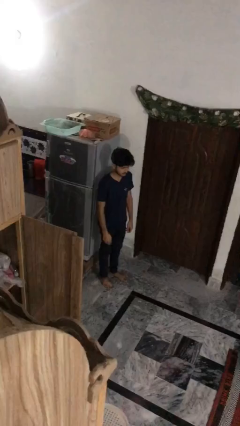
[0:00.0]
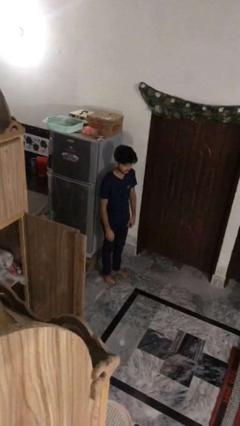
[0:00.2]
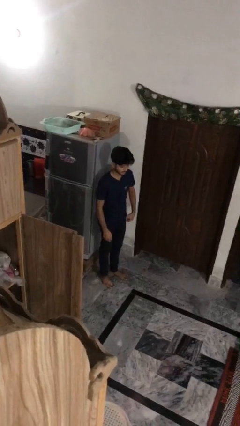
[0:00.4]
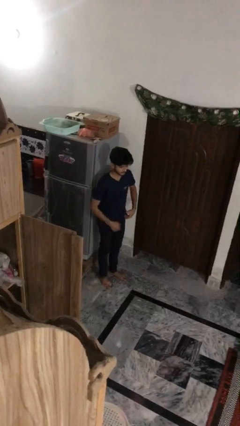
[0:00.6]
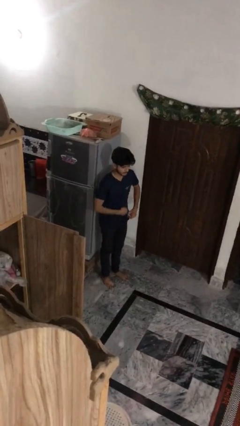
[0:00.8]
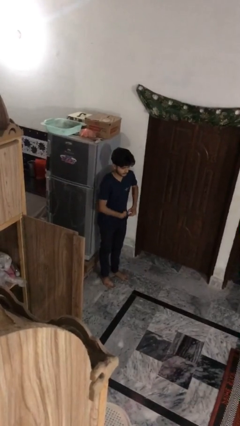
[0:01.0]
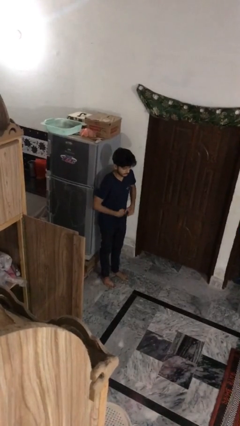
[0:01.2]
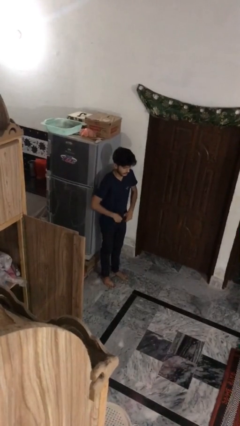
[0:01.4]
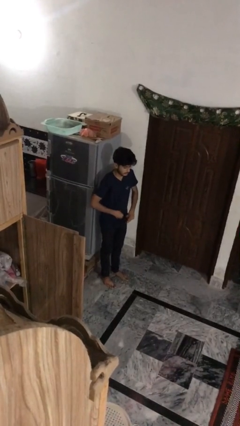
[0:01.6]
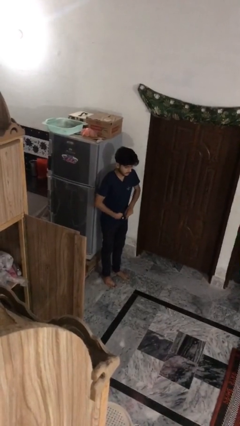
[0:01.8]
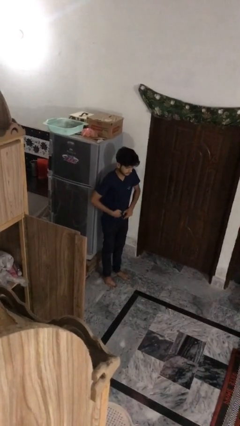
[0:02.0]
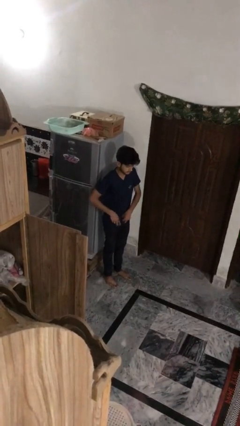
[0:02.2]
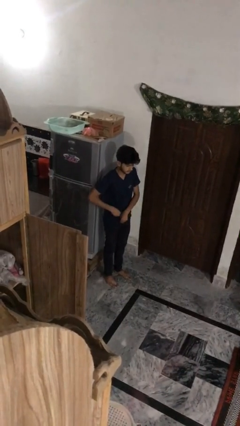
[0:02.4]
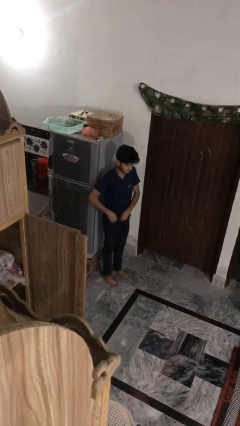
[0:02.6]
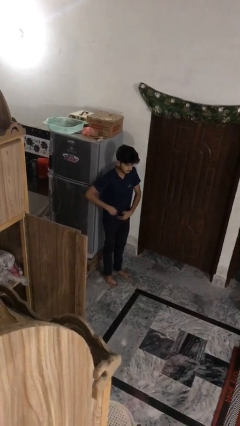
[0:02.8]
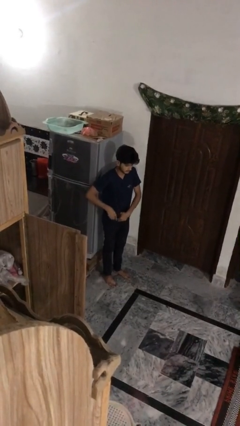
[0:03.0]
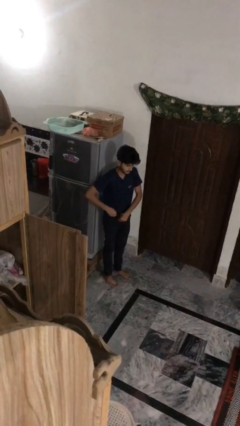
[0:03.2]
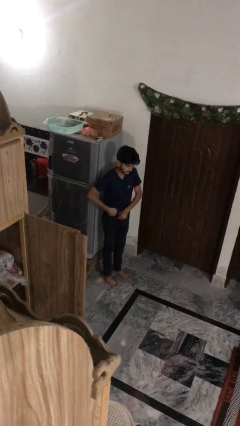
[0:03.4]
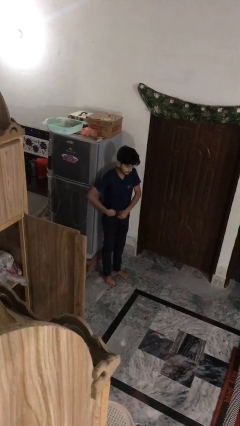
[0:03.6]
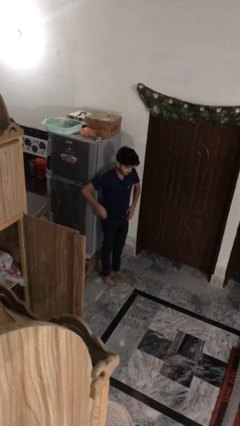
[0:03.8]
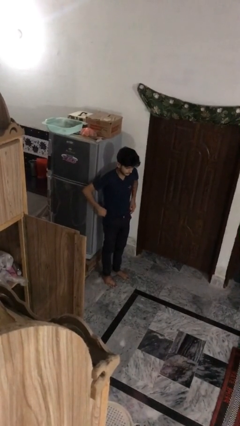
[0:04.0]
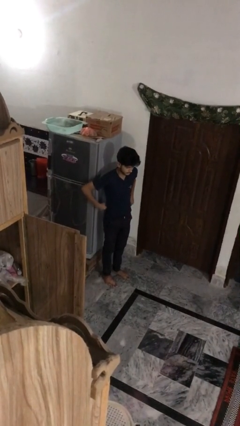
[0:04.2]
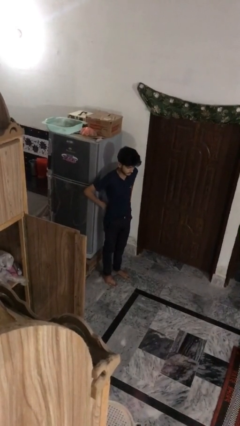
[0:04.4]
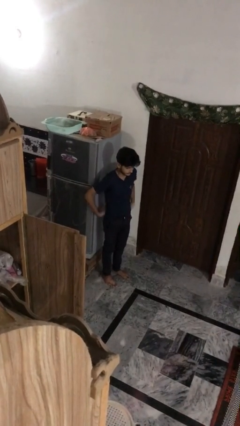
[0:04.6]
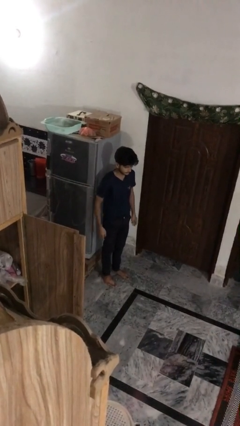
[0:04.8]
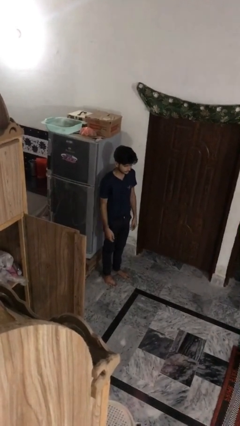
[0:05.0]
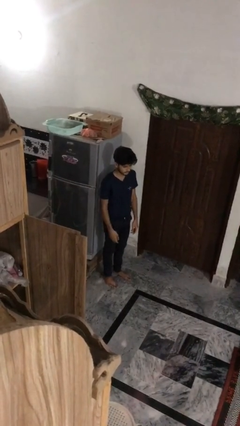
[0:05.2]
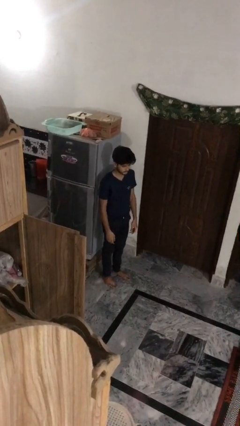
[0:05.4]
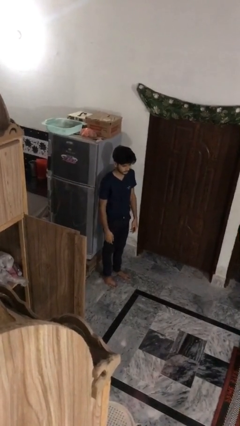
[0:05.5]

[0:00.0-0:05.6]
person tucks in shirt

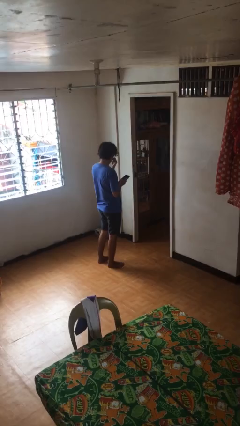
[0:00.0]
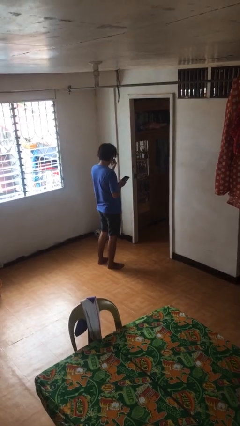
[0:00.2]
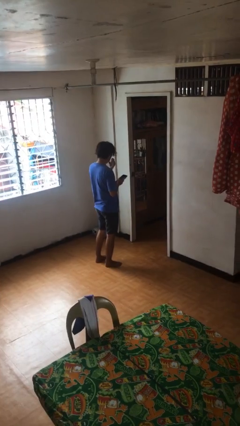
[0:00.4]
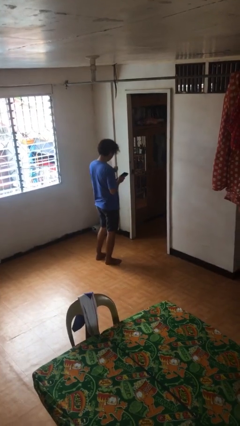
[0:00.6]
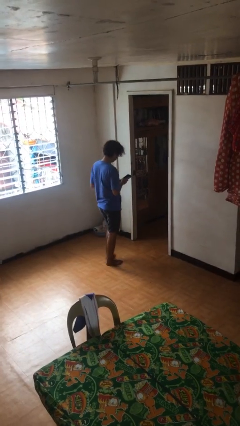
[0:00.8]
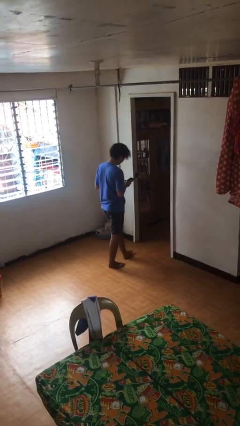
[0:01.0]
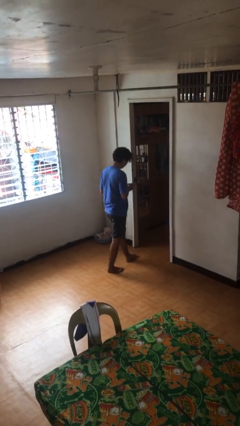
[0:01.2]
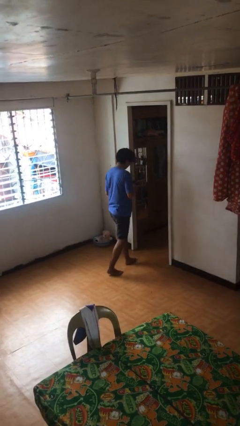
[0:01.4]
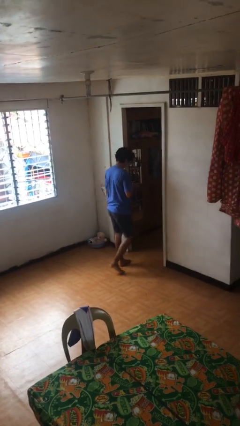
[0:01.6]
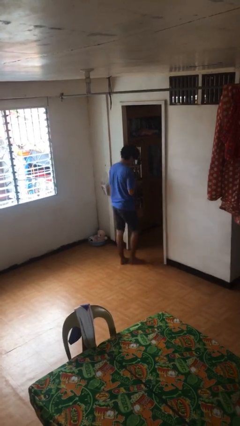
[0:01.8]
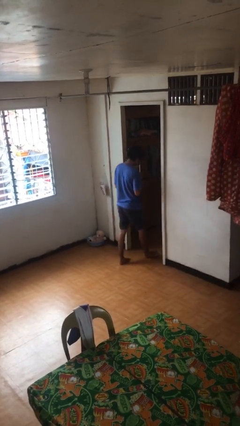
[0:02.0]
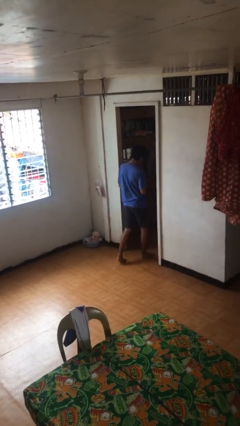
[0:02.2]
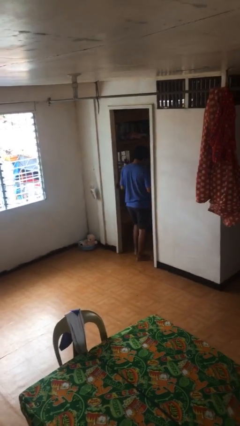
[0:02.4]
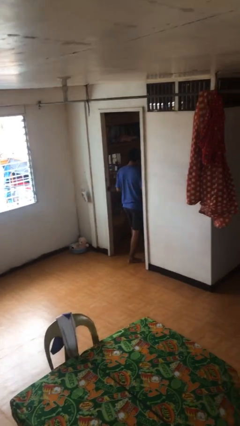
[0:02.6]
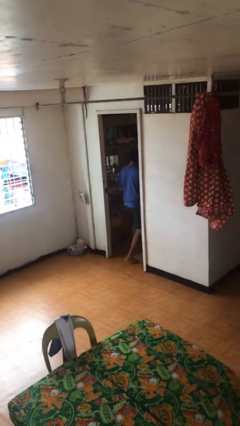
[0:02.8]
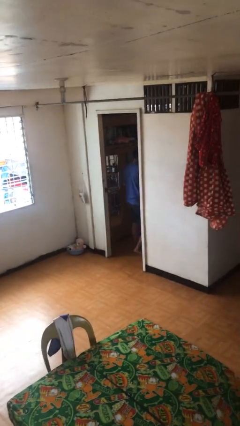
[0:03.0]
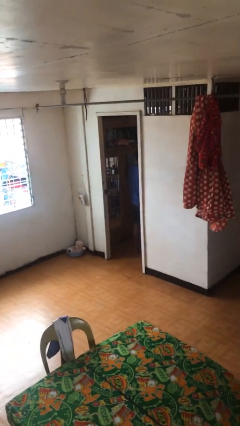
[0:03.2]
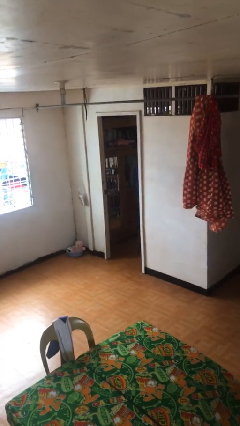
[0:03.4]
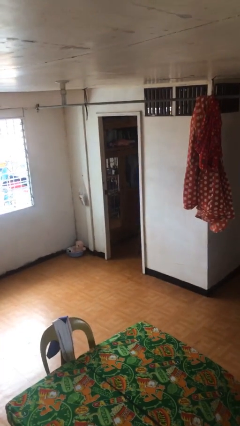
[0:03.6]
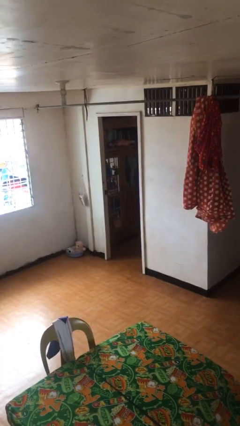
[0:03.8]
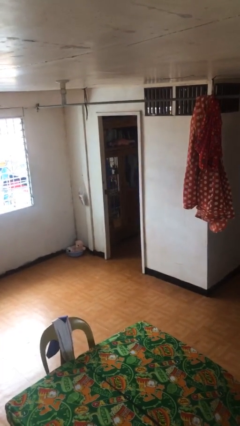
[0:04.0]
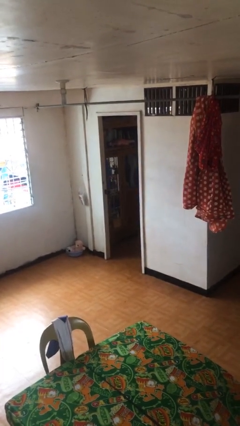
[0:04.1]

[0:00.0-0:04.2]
person enters scene through structure

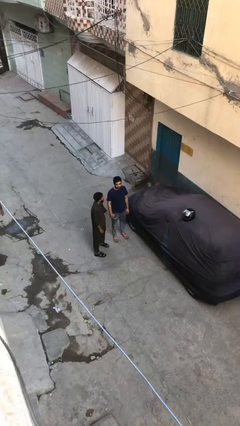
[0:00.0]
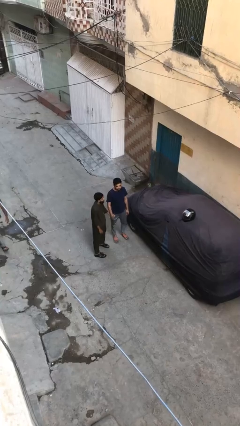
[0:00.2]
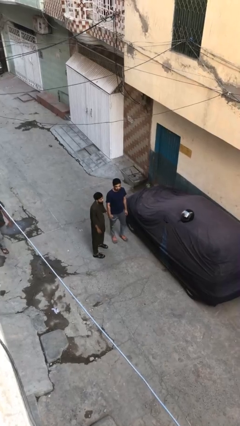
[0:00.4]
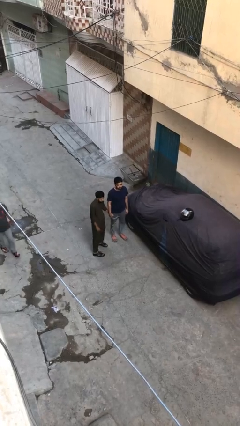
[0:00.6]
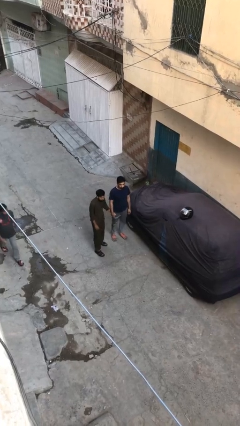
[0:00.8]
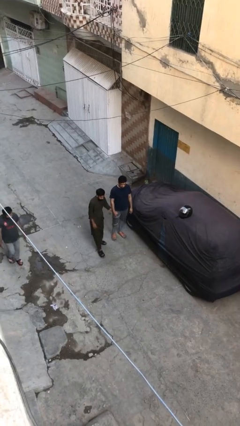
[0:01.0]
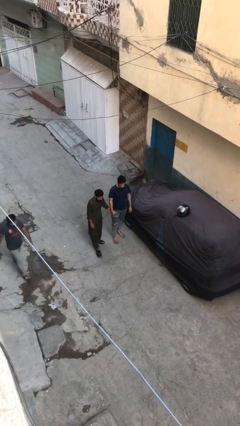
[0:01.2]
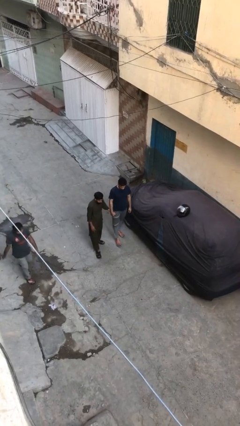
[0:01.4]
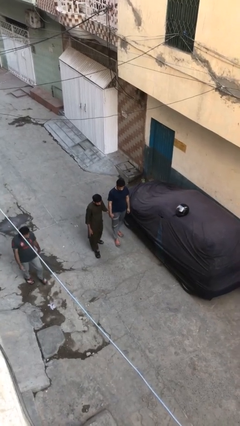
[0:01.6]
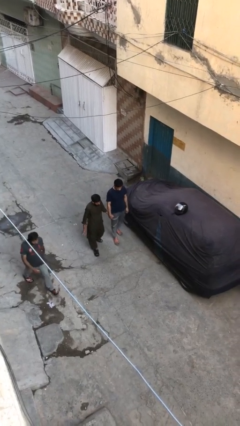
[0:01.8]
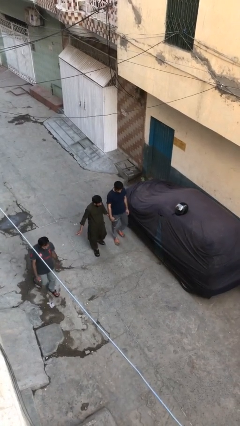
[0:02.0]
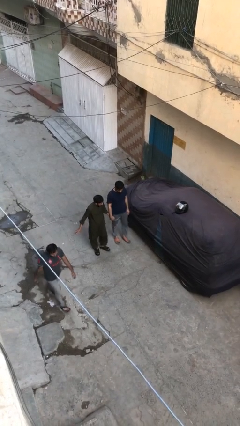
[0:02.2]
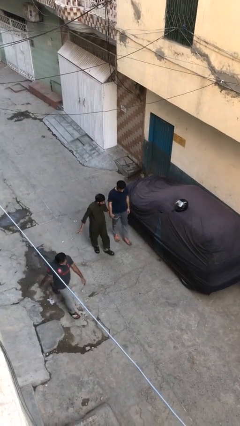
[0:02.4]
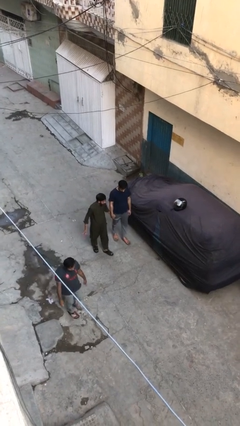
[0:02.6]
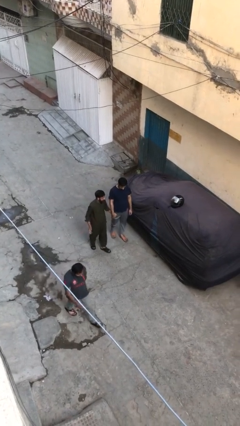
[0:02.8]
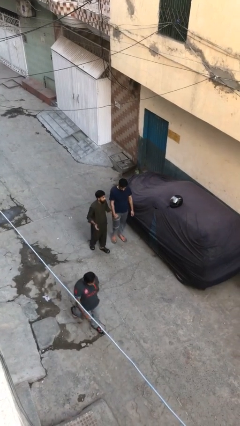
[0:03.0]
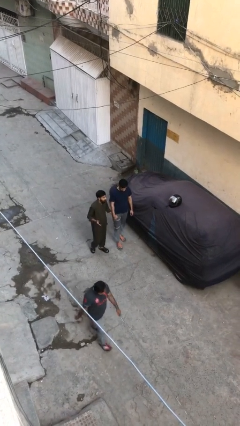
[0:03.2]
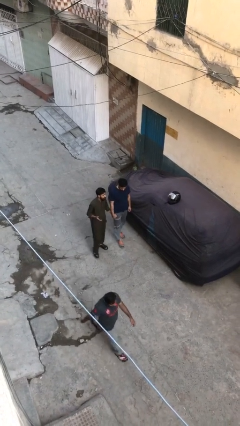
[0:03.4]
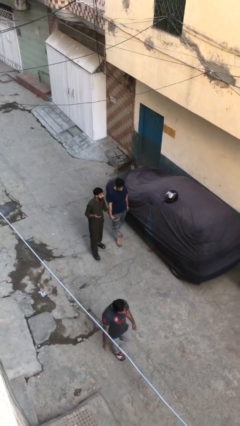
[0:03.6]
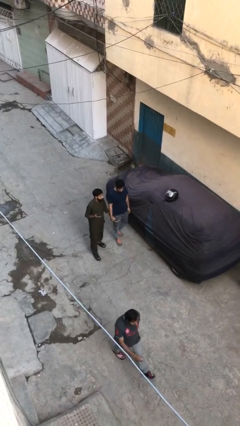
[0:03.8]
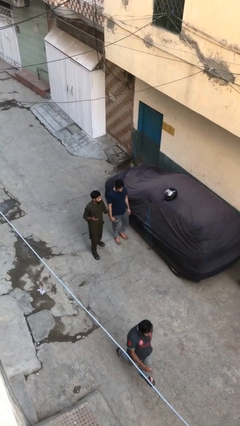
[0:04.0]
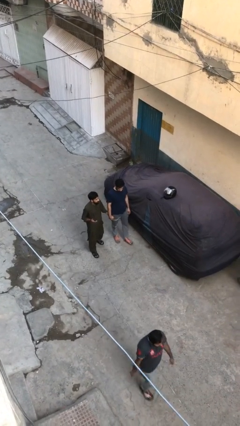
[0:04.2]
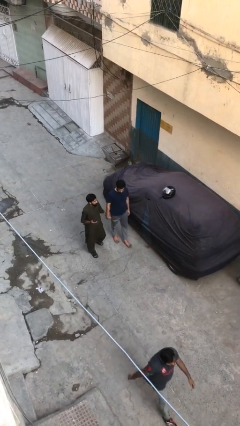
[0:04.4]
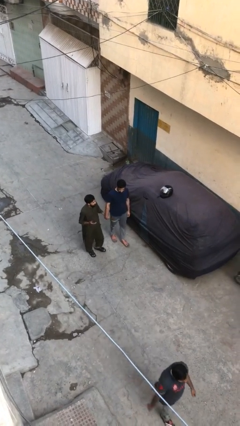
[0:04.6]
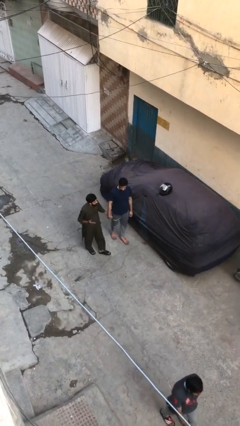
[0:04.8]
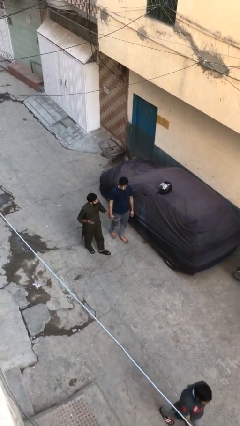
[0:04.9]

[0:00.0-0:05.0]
person holds hand

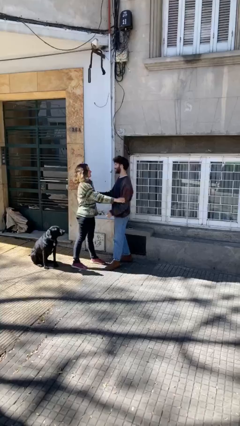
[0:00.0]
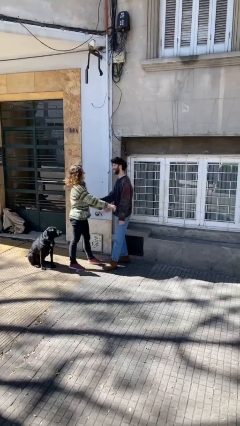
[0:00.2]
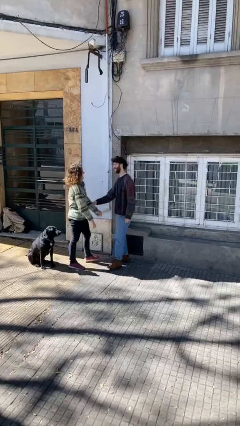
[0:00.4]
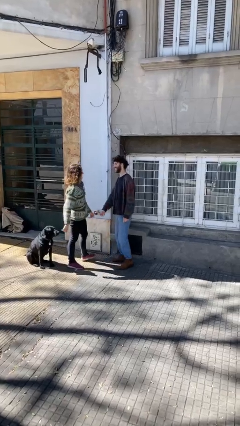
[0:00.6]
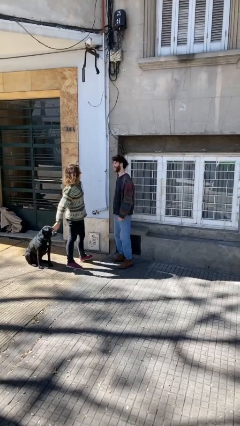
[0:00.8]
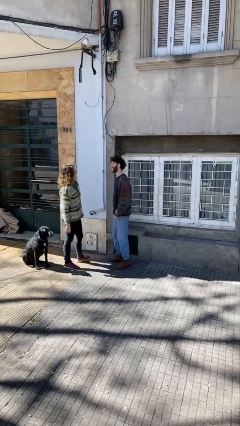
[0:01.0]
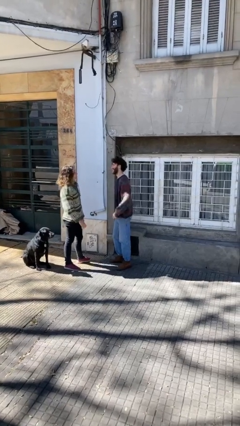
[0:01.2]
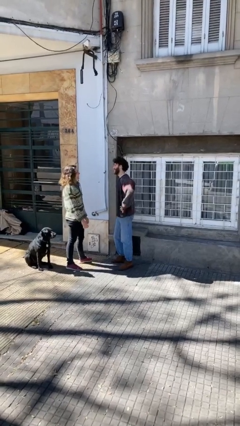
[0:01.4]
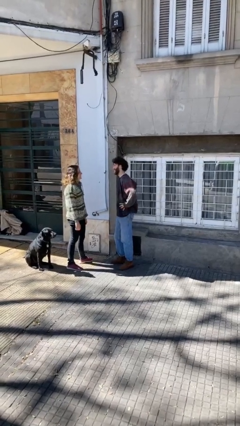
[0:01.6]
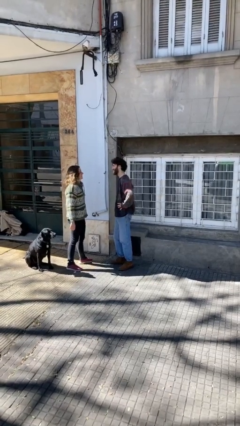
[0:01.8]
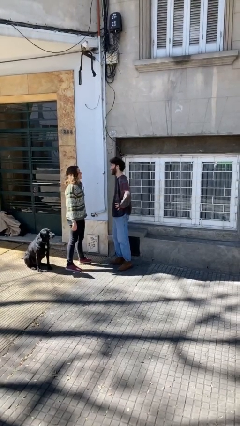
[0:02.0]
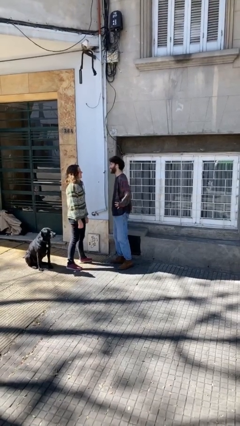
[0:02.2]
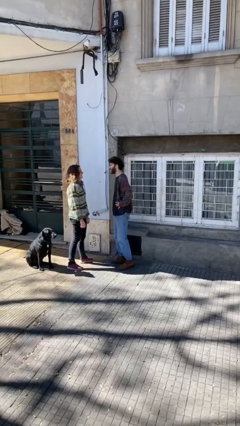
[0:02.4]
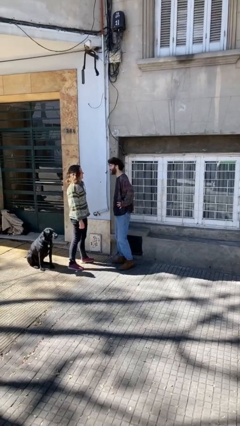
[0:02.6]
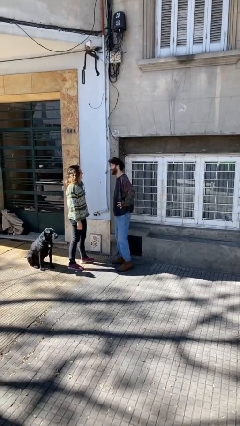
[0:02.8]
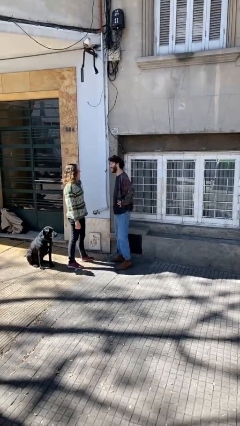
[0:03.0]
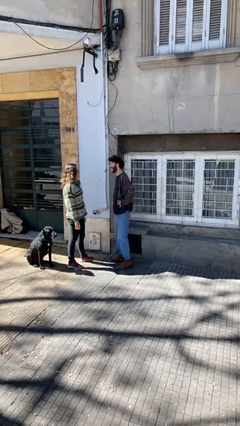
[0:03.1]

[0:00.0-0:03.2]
person talks to person
